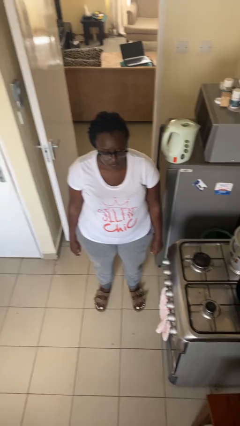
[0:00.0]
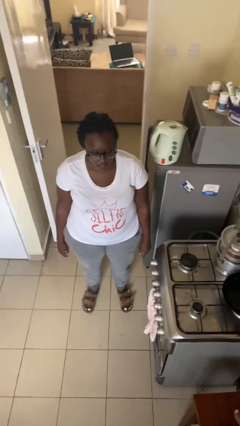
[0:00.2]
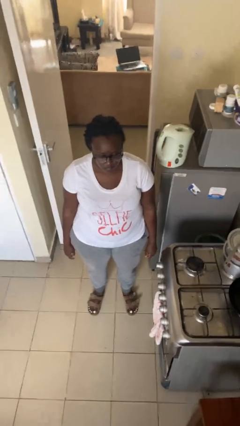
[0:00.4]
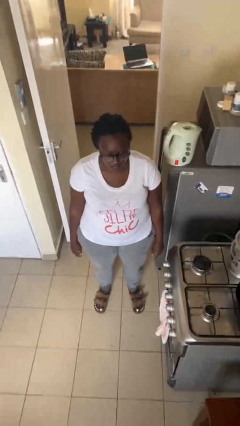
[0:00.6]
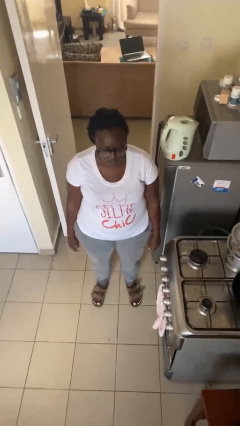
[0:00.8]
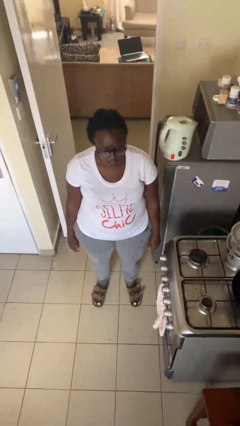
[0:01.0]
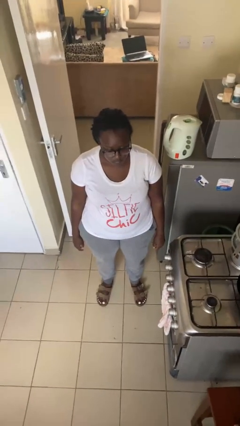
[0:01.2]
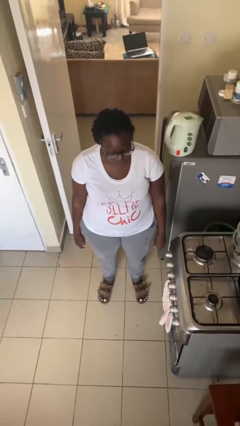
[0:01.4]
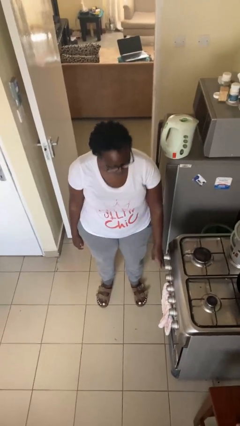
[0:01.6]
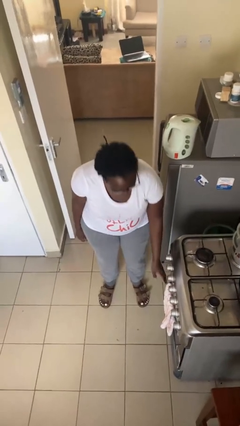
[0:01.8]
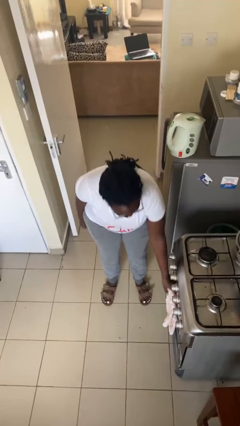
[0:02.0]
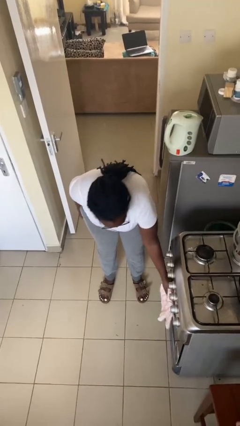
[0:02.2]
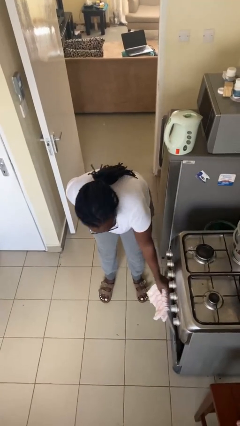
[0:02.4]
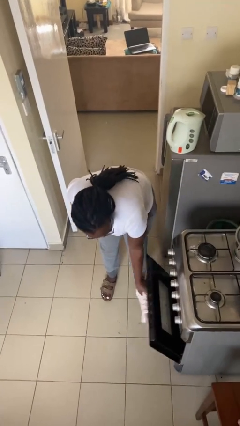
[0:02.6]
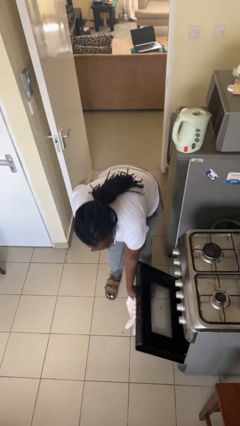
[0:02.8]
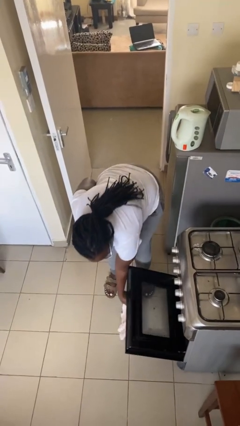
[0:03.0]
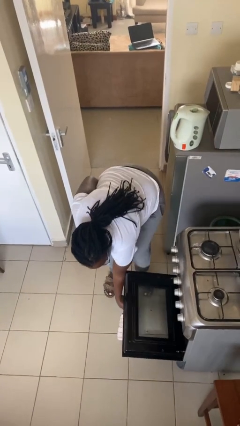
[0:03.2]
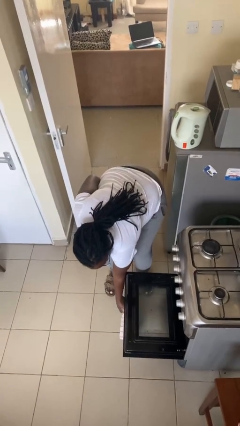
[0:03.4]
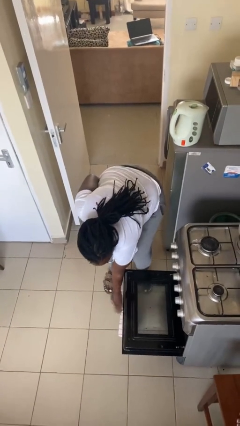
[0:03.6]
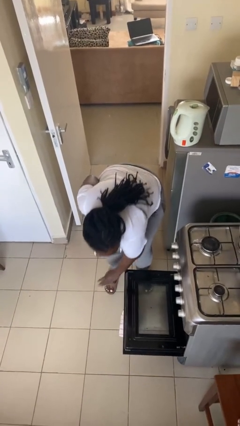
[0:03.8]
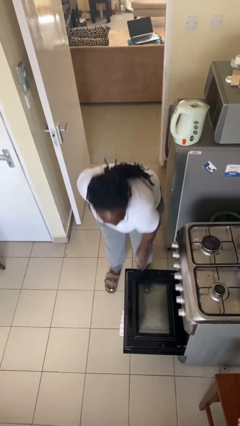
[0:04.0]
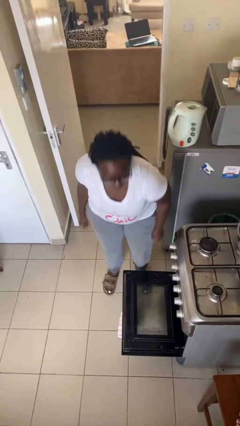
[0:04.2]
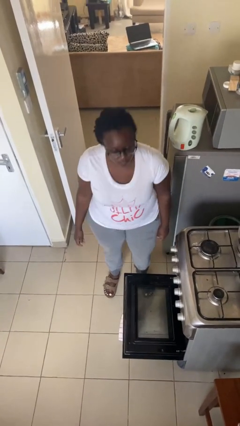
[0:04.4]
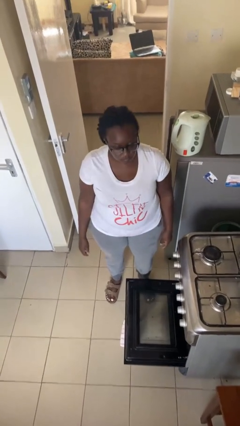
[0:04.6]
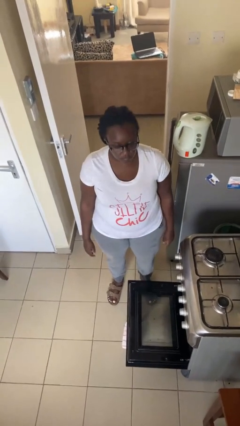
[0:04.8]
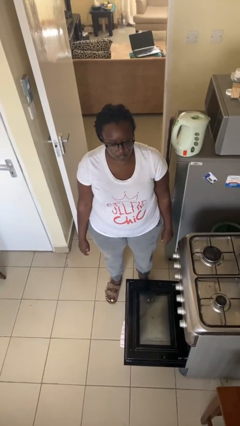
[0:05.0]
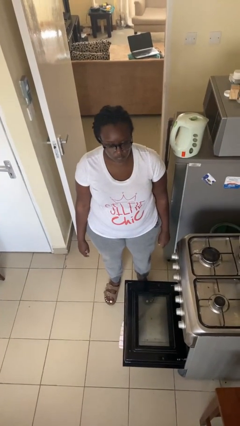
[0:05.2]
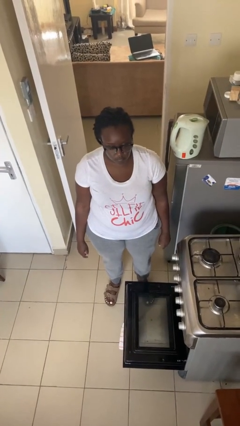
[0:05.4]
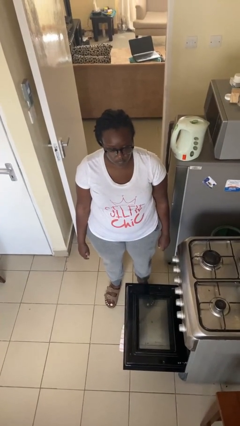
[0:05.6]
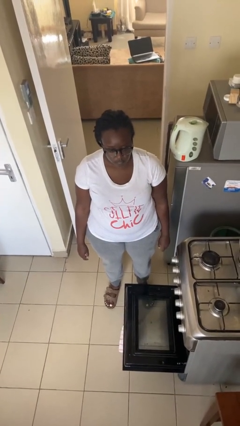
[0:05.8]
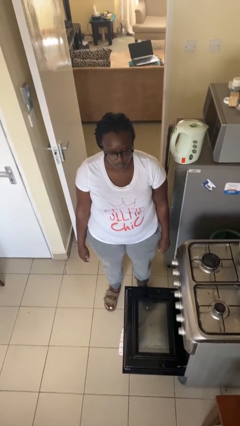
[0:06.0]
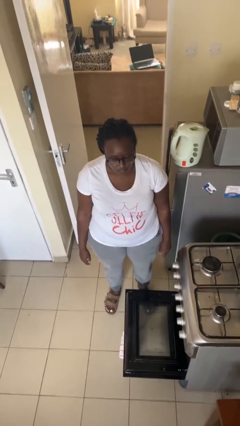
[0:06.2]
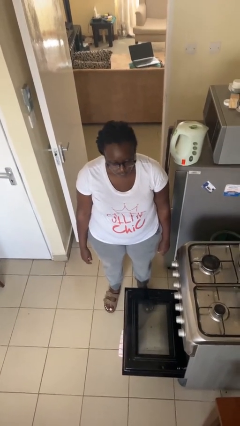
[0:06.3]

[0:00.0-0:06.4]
person opens oven door

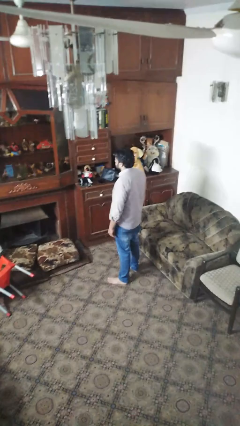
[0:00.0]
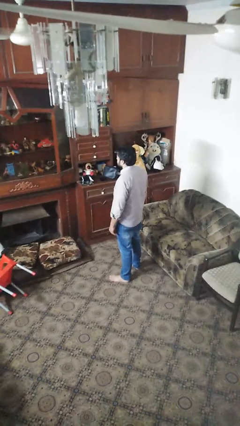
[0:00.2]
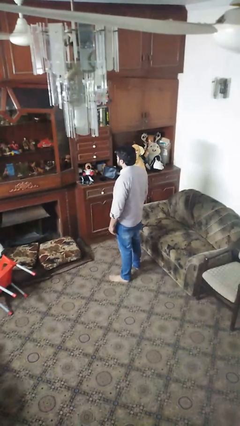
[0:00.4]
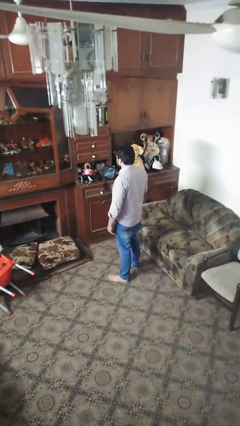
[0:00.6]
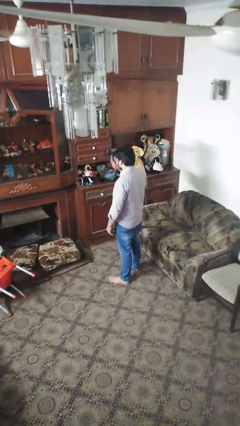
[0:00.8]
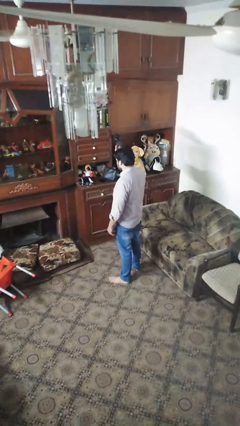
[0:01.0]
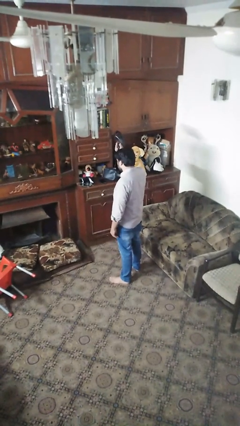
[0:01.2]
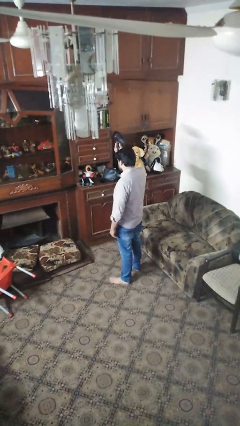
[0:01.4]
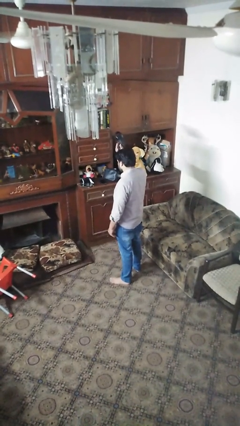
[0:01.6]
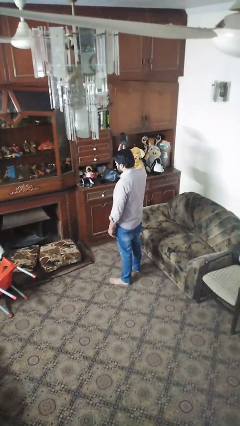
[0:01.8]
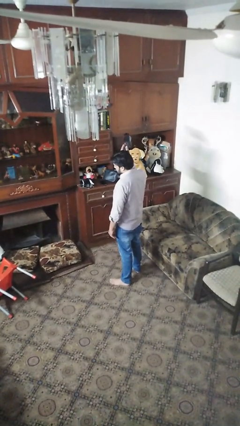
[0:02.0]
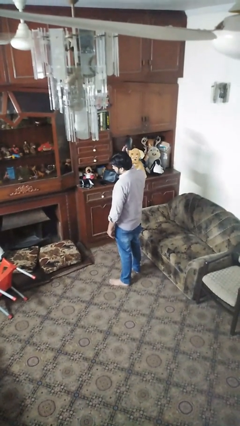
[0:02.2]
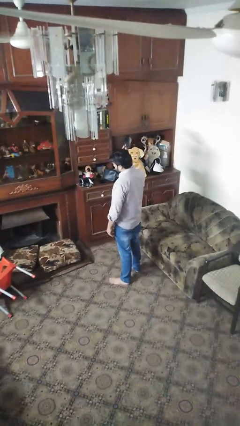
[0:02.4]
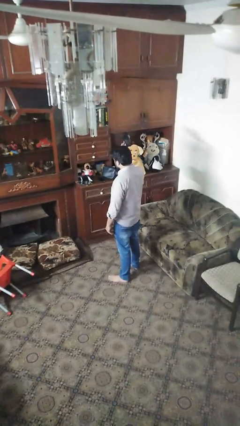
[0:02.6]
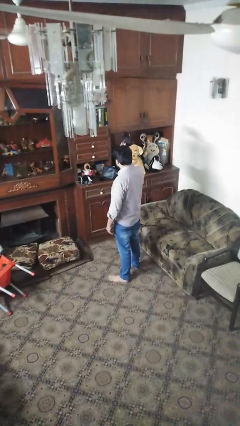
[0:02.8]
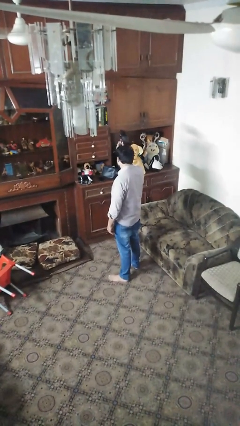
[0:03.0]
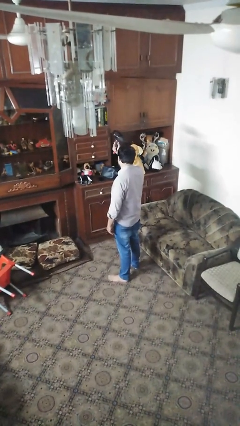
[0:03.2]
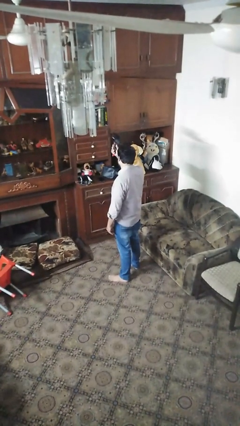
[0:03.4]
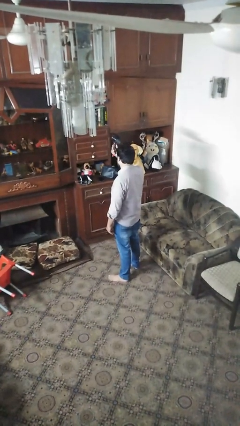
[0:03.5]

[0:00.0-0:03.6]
person dries hair with hairdryer

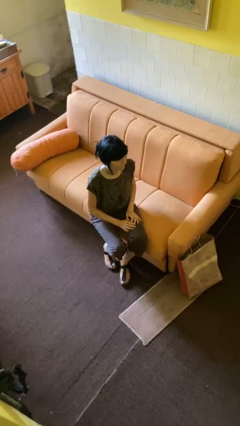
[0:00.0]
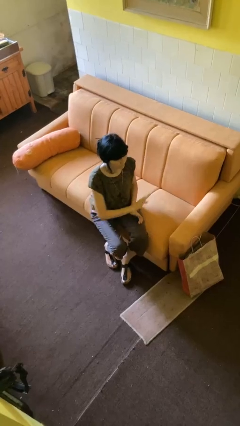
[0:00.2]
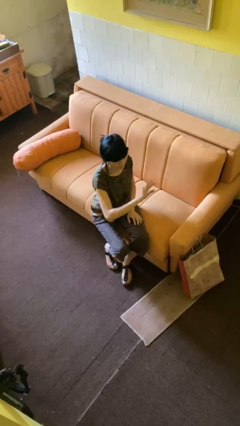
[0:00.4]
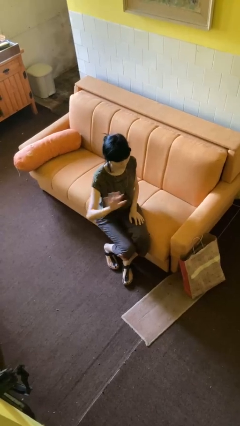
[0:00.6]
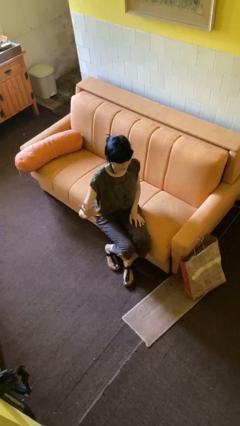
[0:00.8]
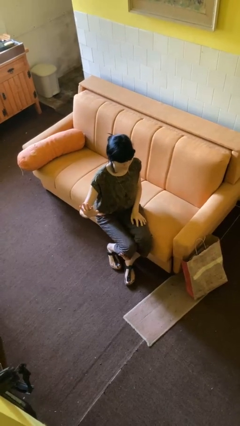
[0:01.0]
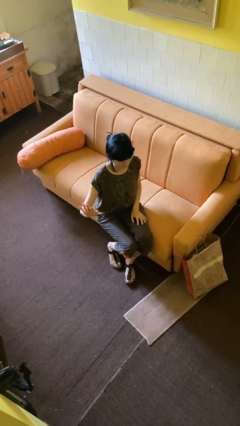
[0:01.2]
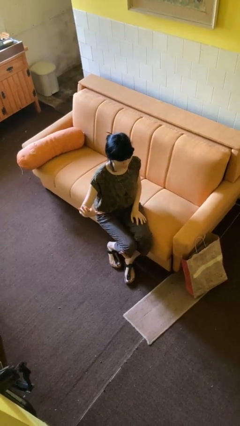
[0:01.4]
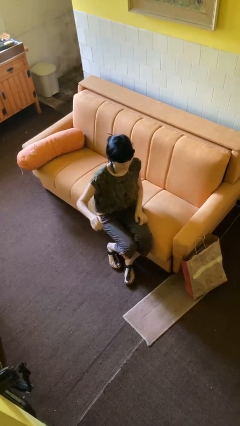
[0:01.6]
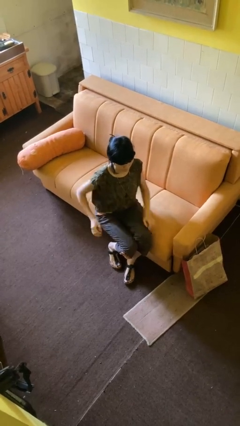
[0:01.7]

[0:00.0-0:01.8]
person gestures swipe right

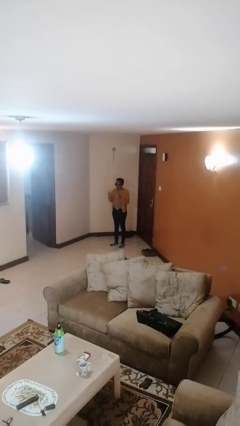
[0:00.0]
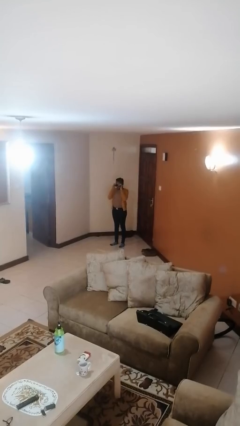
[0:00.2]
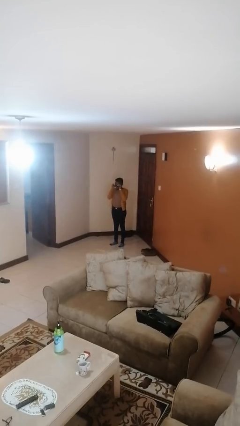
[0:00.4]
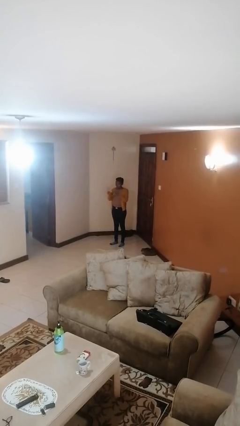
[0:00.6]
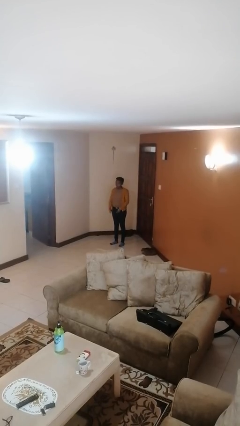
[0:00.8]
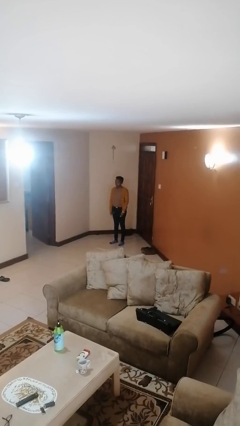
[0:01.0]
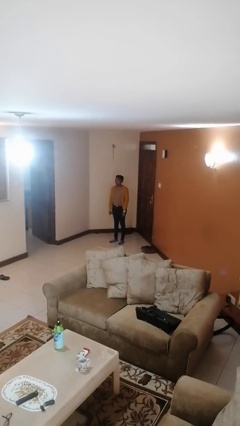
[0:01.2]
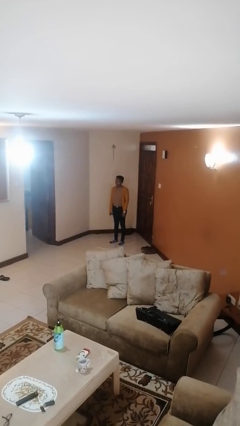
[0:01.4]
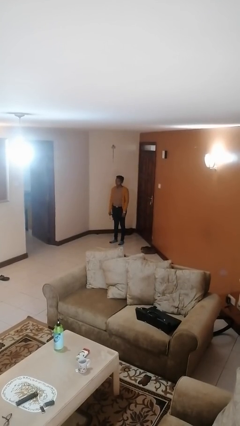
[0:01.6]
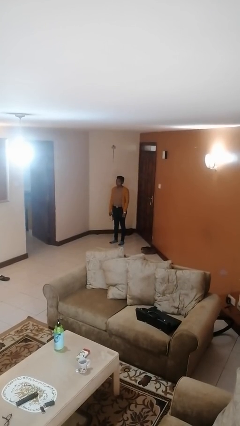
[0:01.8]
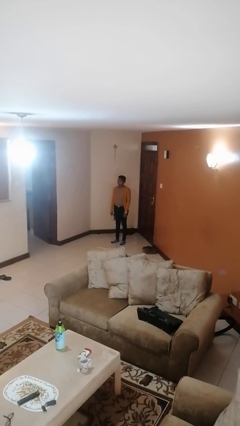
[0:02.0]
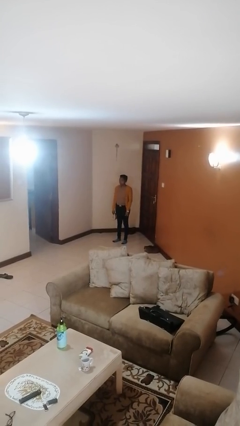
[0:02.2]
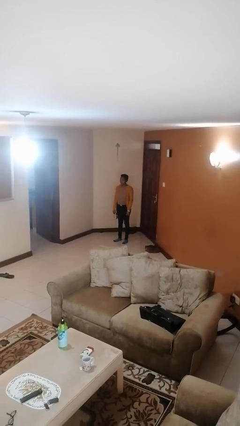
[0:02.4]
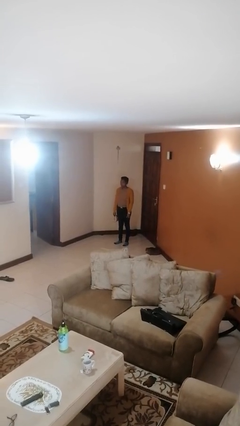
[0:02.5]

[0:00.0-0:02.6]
person takes off sunglasses

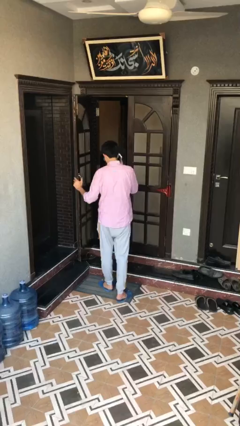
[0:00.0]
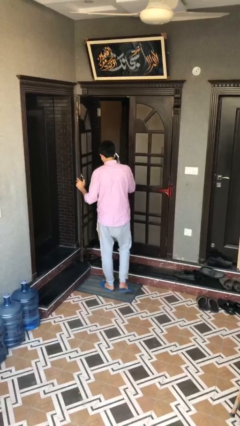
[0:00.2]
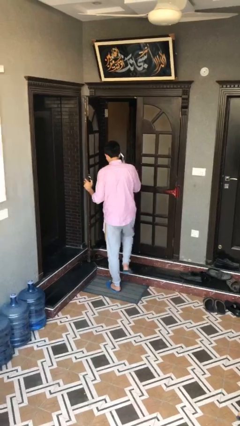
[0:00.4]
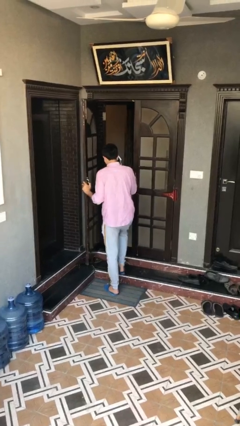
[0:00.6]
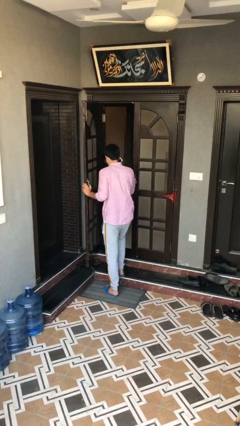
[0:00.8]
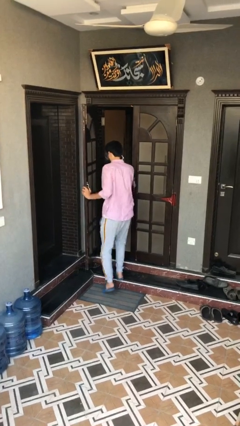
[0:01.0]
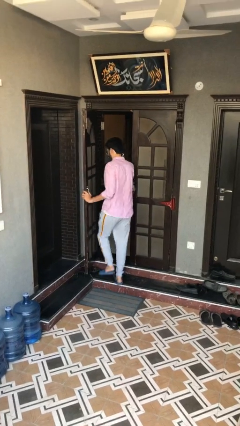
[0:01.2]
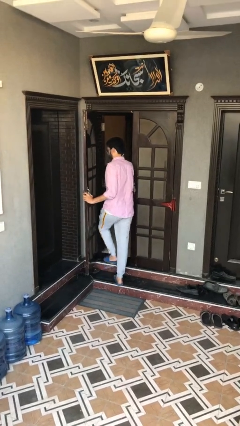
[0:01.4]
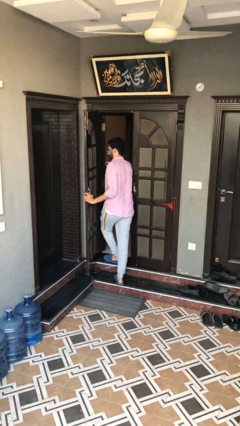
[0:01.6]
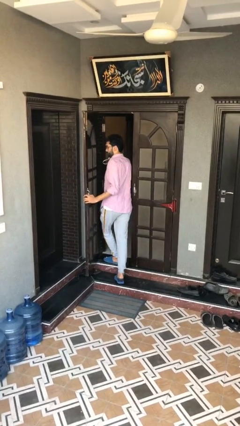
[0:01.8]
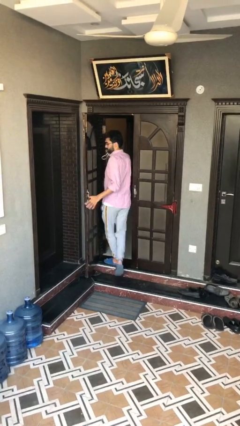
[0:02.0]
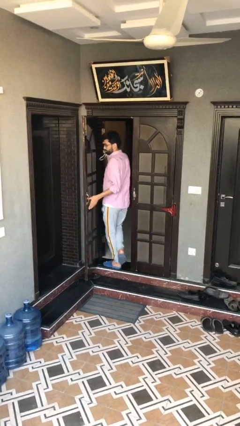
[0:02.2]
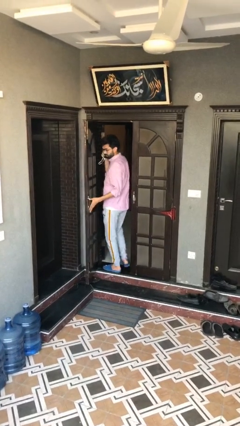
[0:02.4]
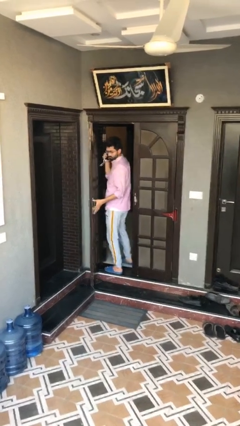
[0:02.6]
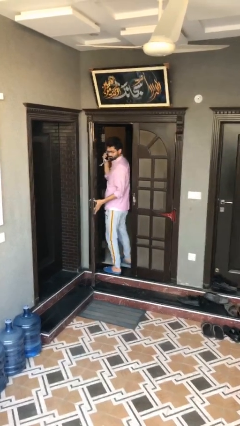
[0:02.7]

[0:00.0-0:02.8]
person exits scene through structure

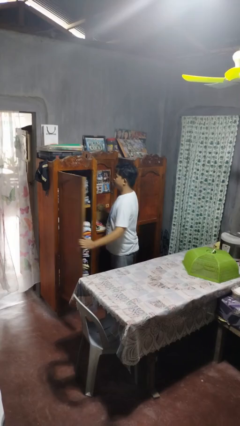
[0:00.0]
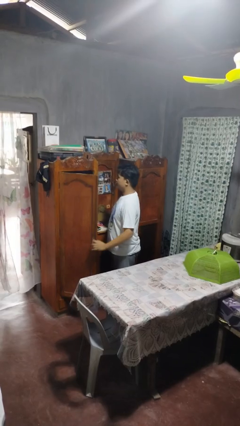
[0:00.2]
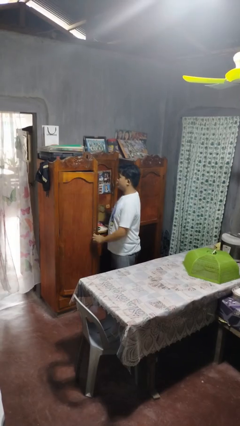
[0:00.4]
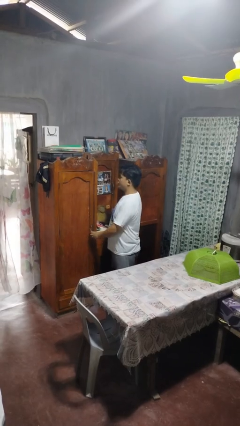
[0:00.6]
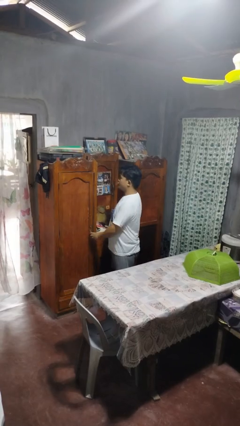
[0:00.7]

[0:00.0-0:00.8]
person closes closet door
